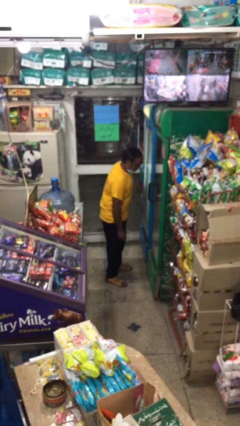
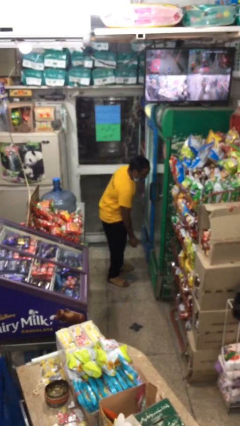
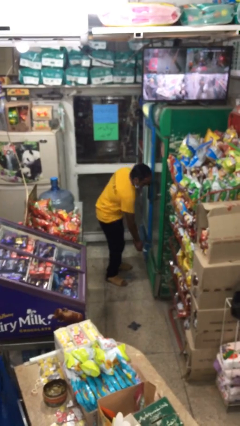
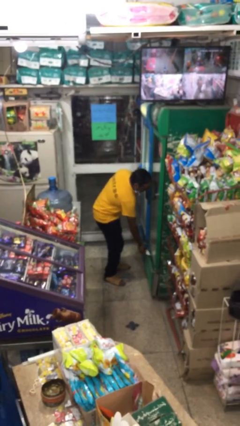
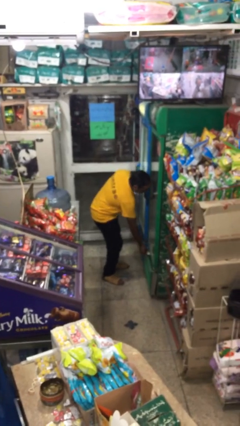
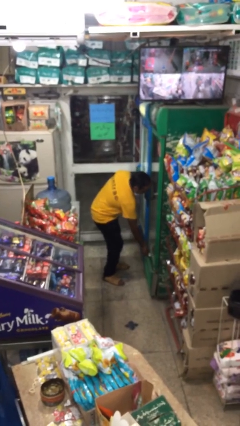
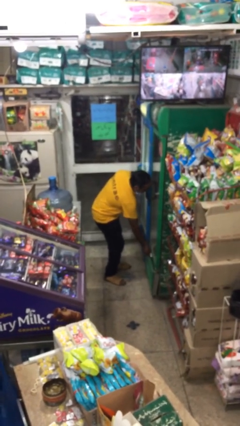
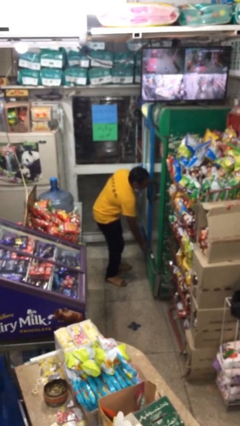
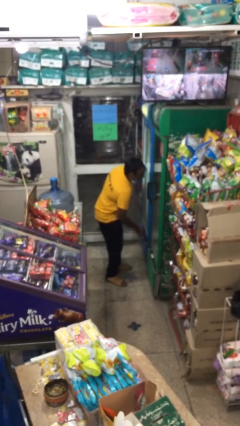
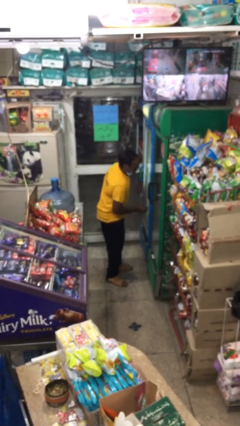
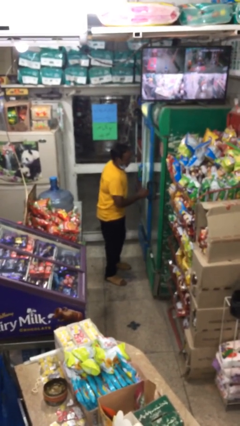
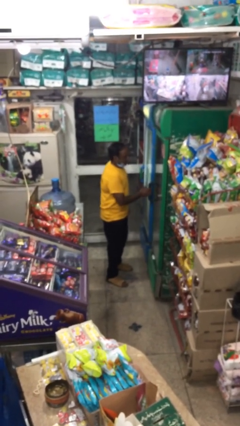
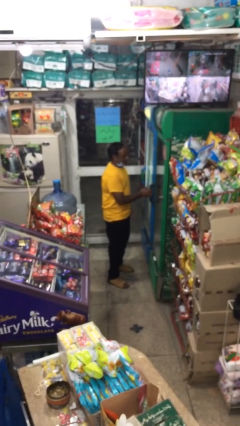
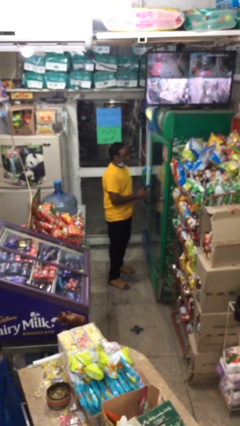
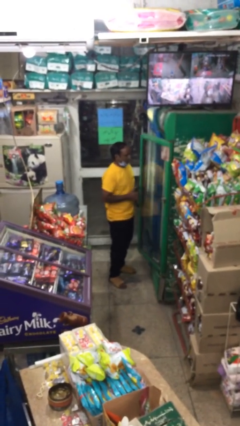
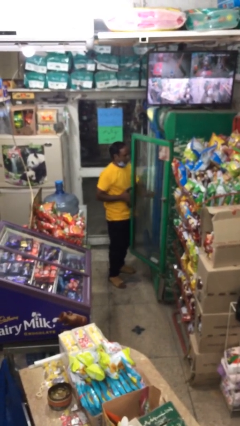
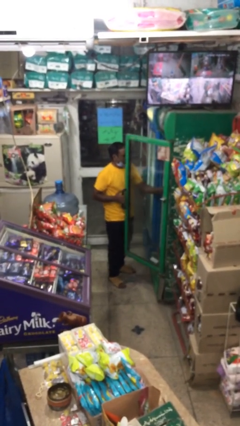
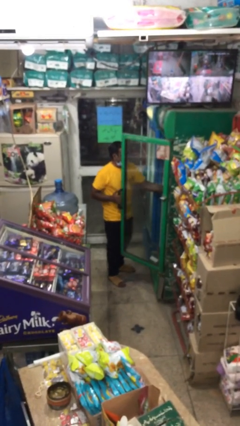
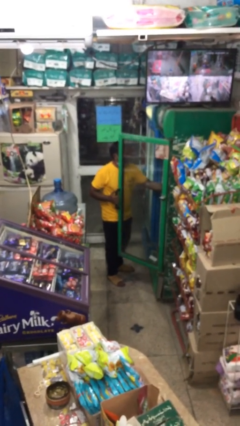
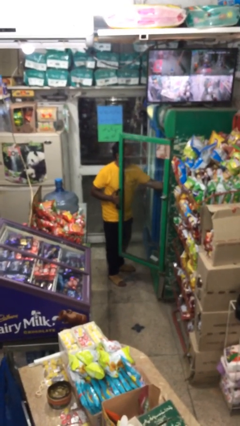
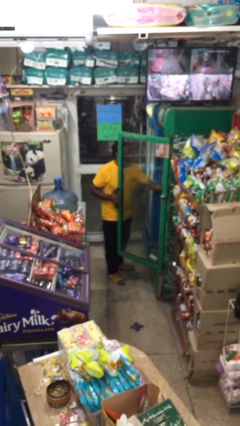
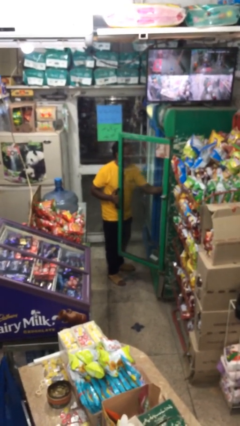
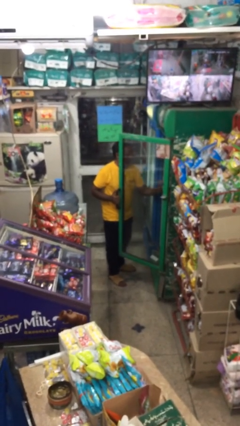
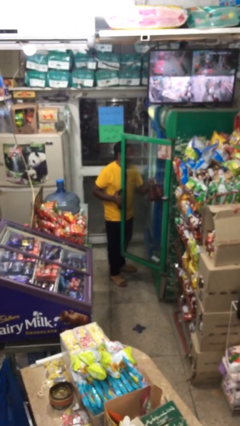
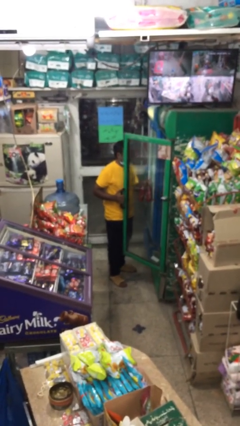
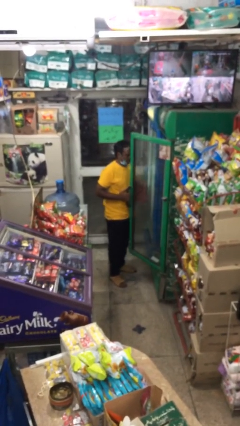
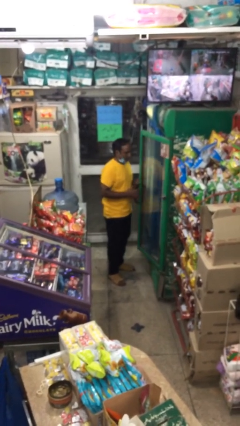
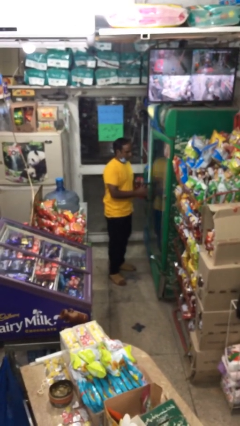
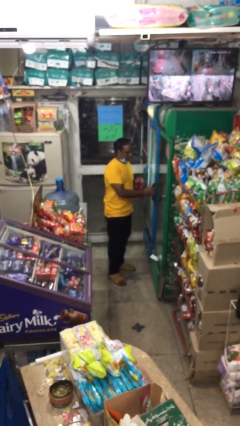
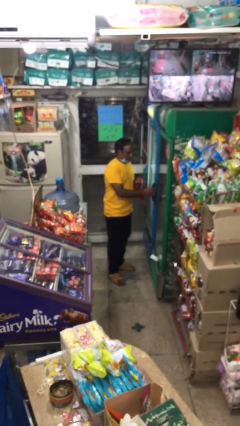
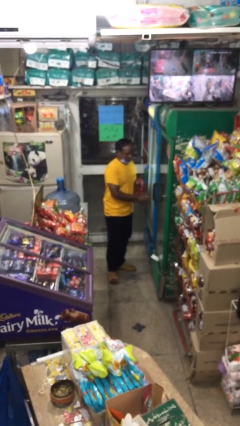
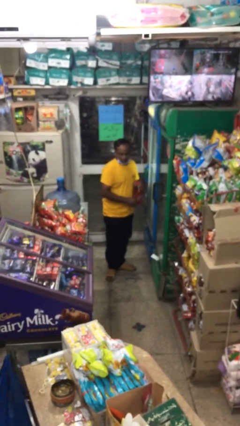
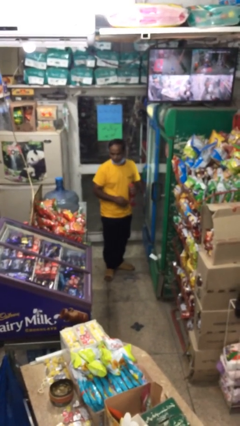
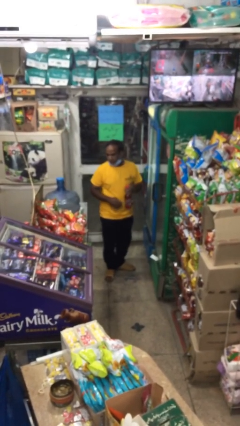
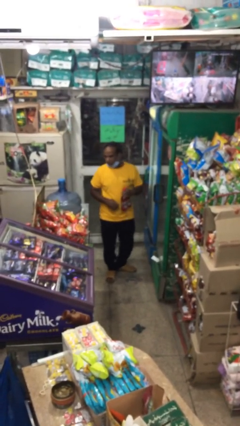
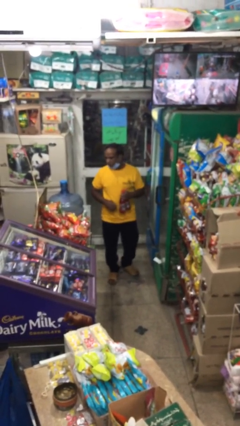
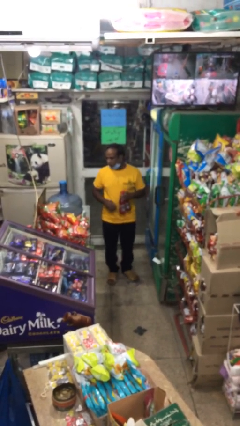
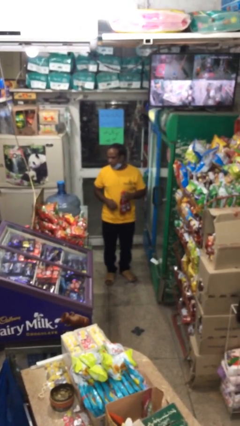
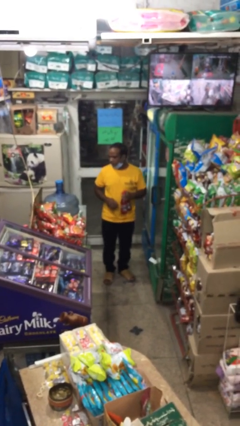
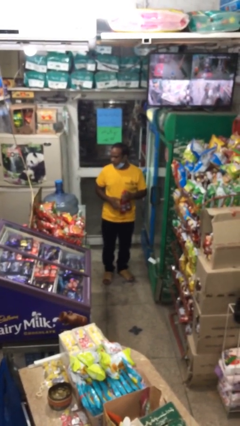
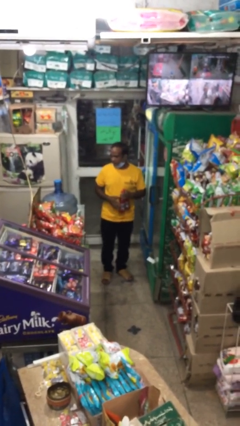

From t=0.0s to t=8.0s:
person purchases from machine

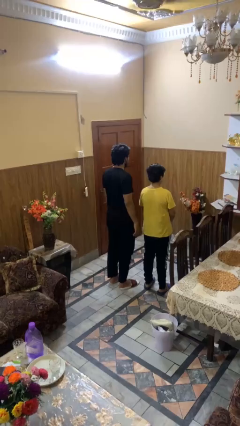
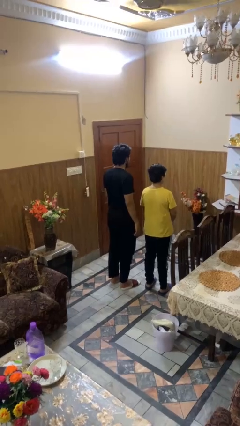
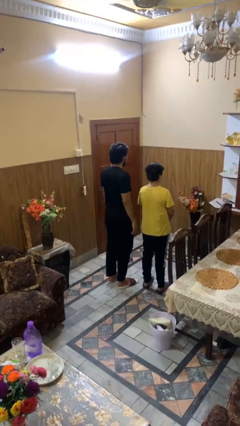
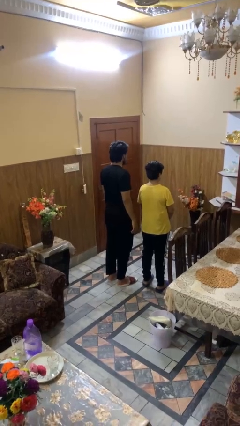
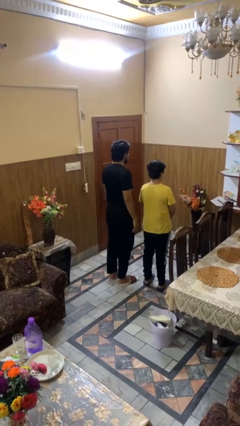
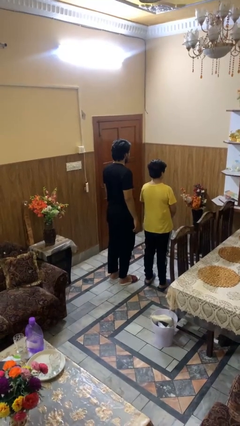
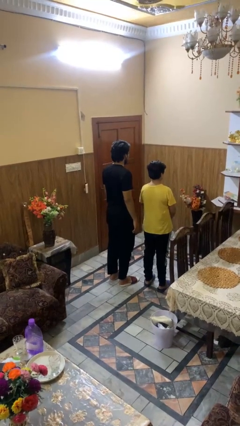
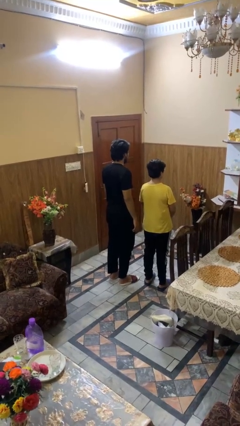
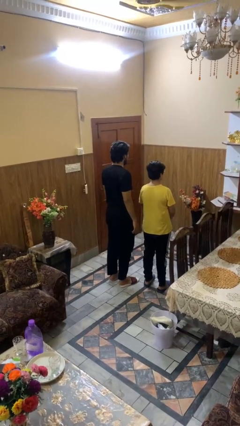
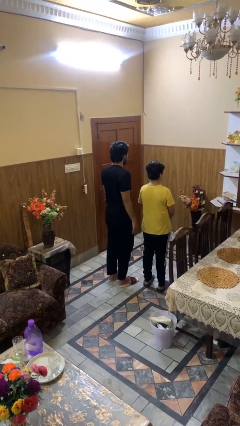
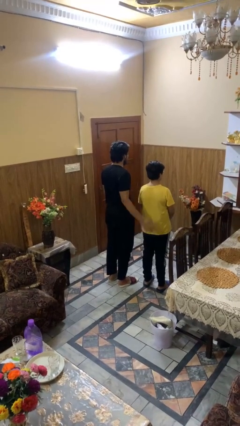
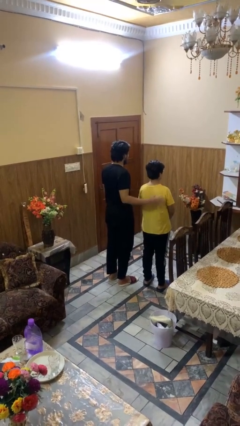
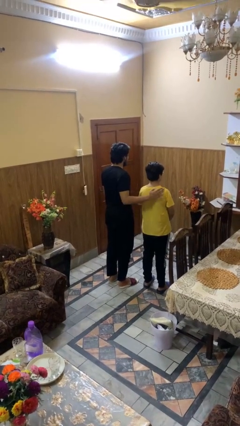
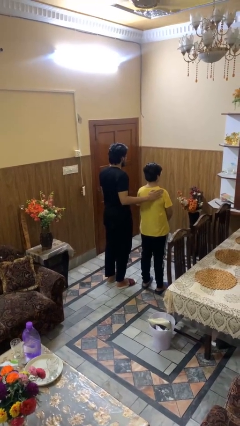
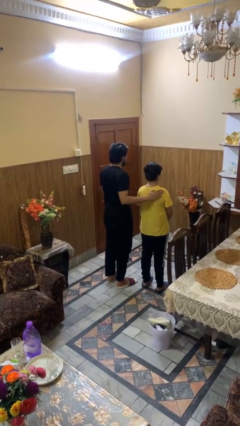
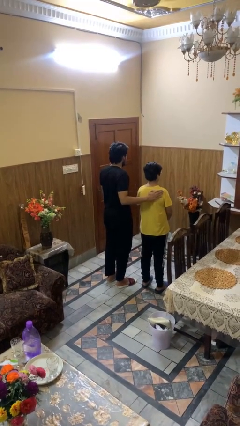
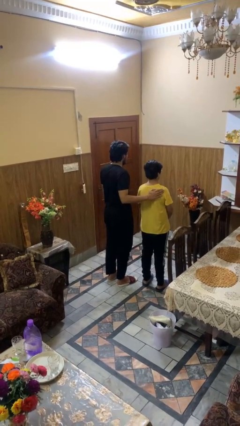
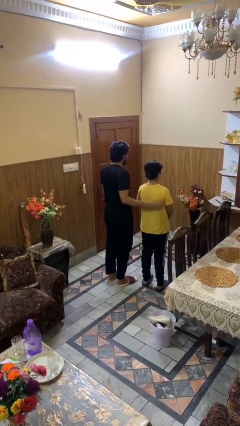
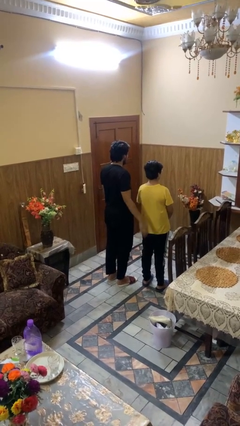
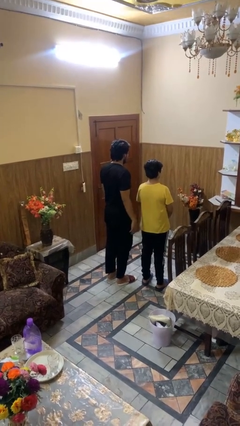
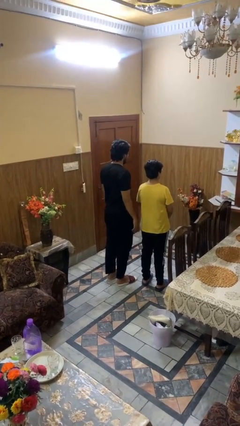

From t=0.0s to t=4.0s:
person touches back of person

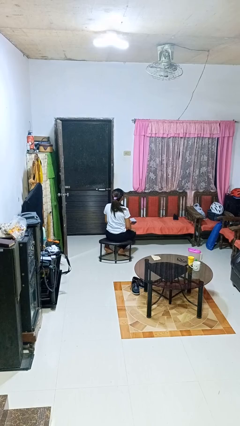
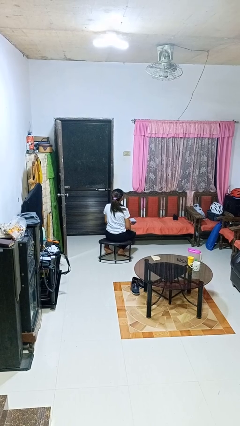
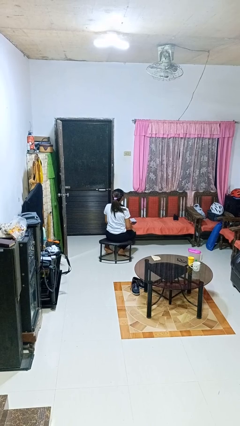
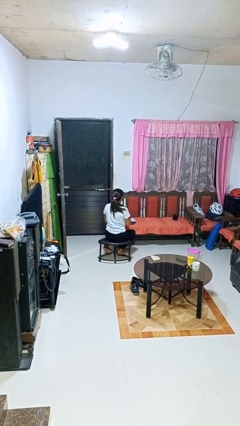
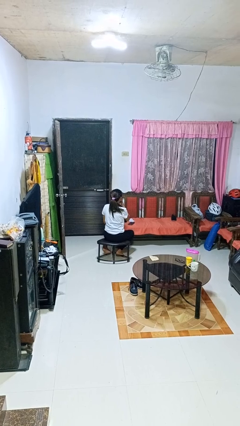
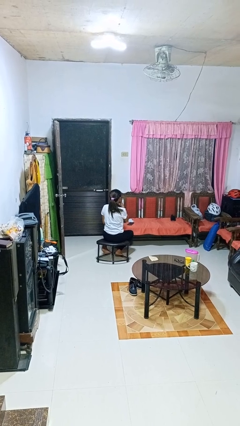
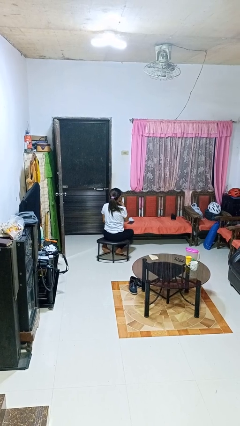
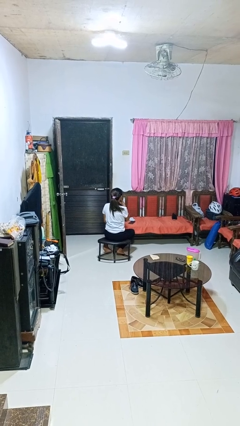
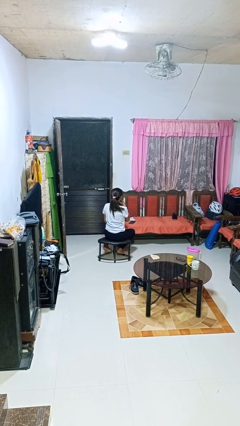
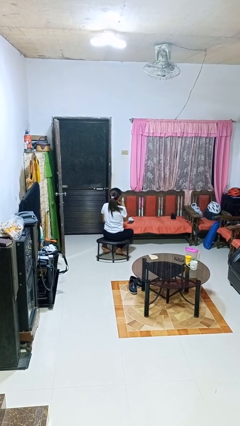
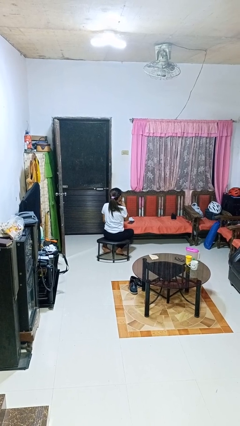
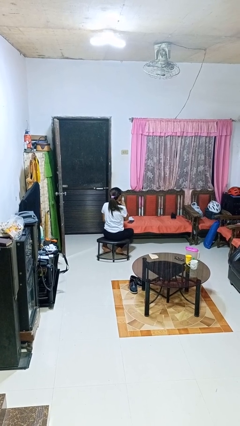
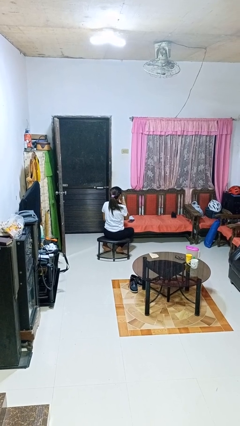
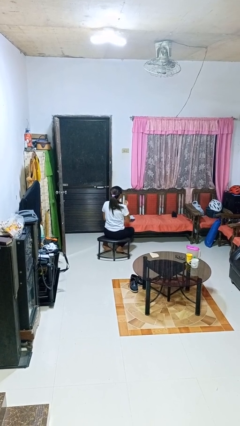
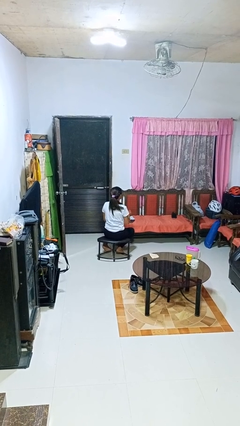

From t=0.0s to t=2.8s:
person strokes chin

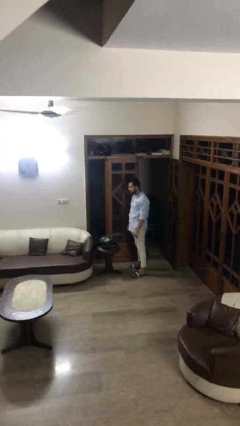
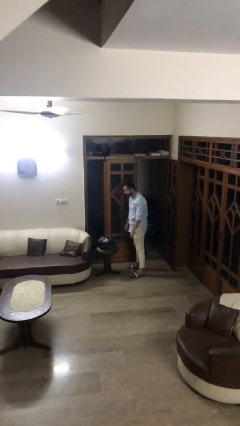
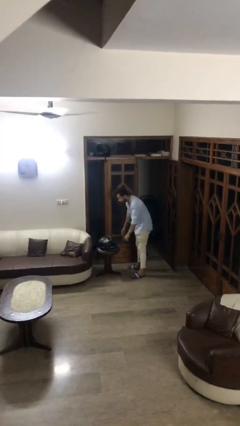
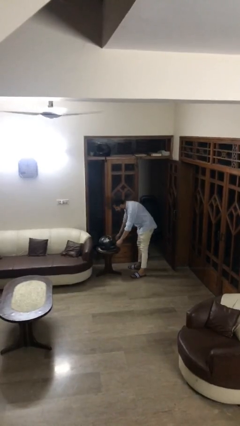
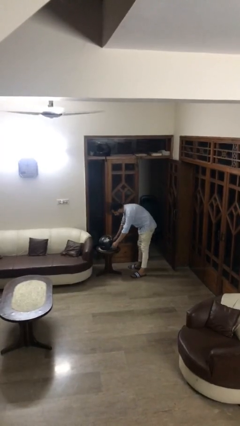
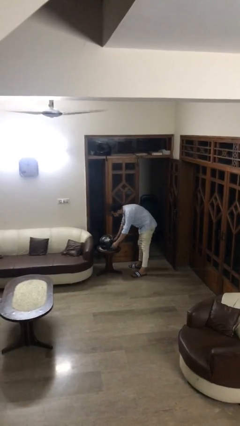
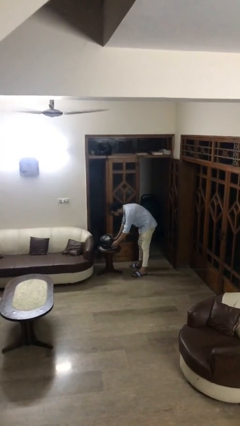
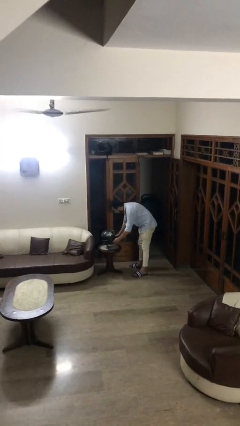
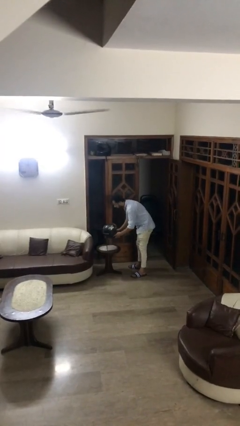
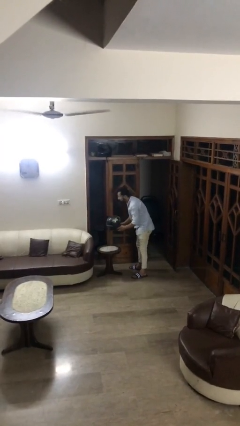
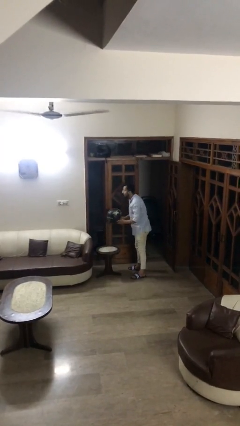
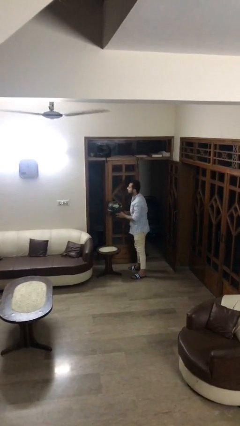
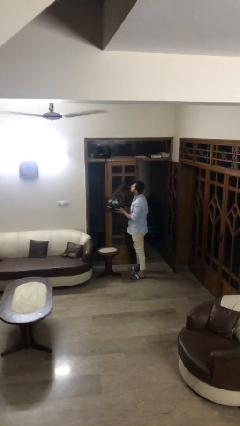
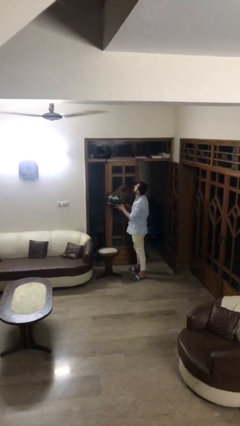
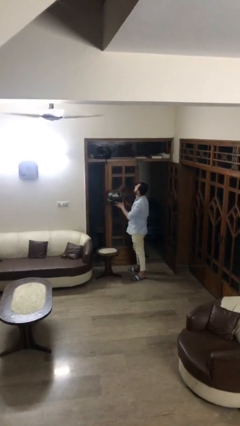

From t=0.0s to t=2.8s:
person picks up object from table
